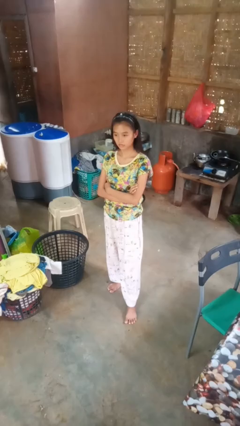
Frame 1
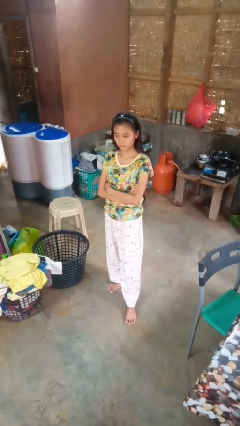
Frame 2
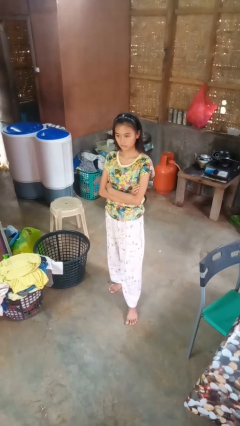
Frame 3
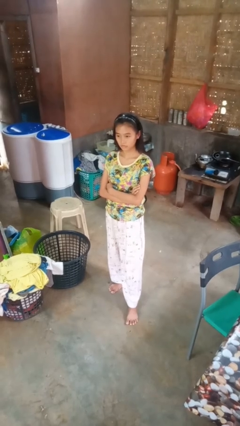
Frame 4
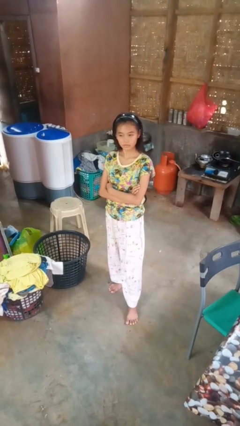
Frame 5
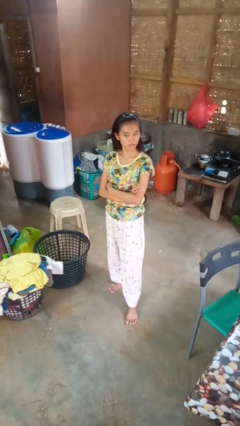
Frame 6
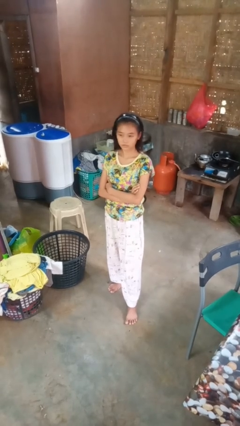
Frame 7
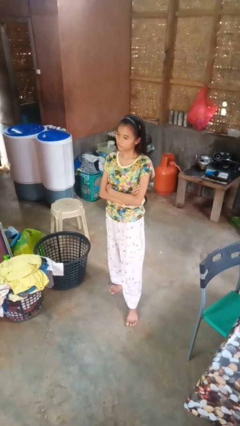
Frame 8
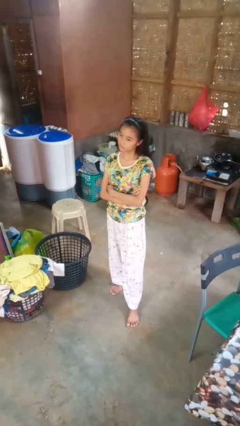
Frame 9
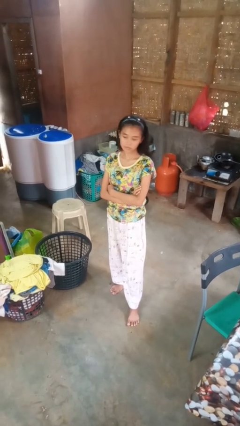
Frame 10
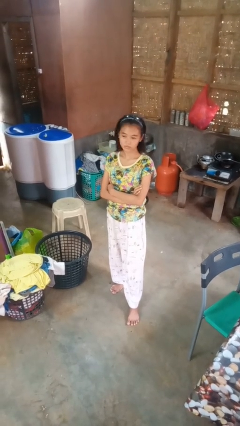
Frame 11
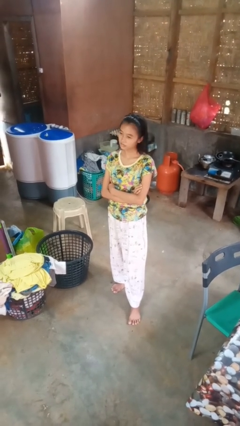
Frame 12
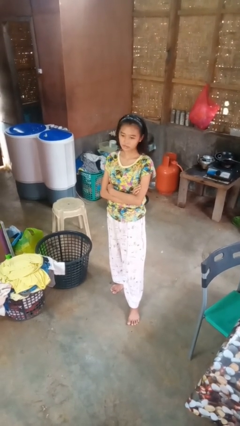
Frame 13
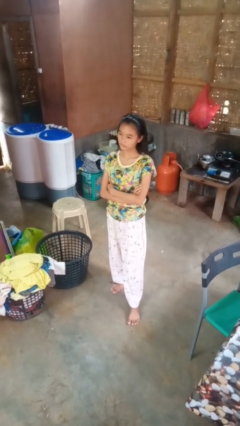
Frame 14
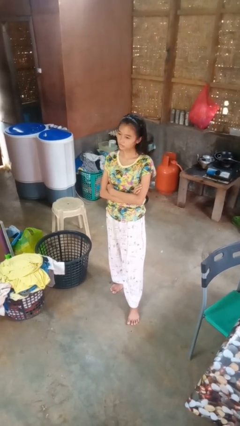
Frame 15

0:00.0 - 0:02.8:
person shakes head

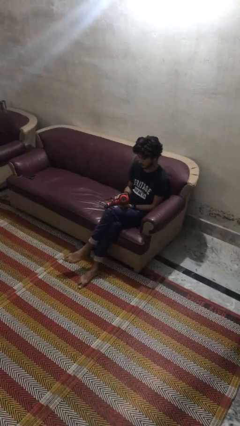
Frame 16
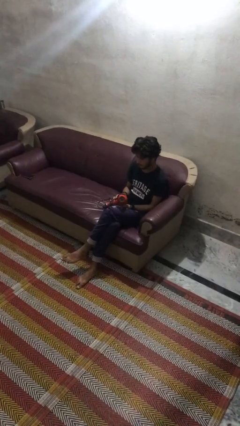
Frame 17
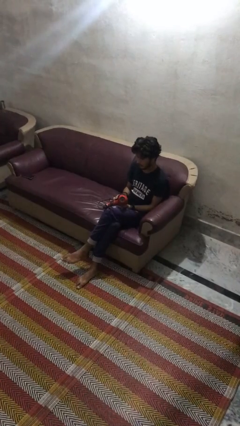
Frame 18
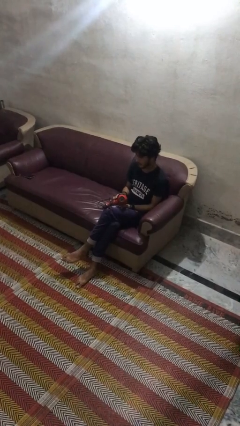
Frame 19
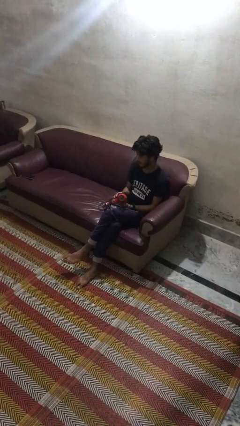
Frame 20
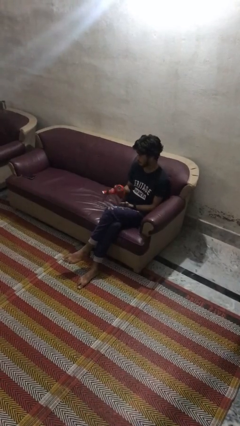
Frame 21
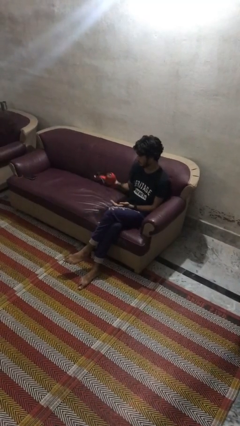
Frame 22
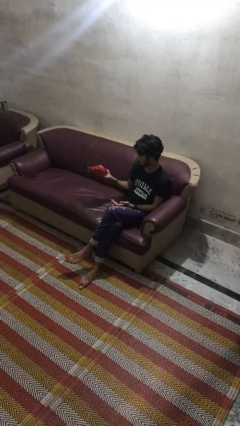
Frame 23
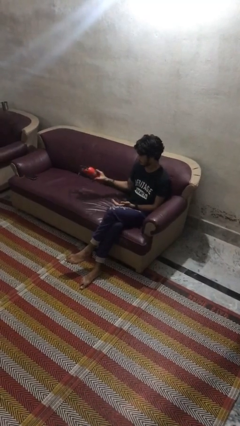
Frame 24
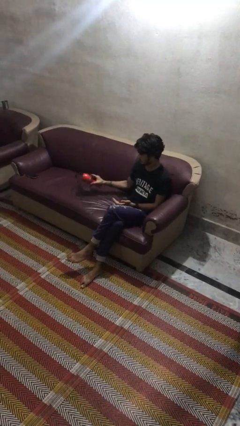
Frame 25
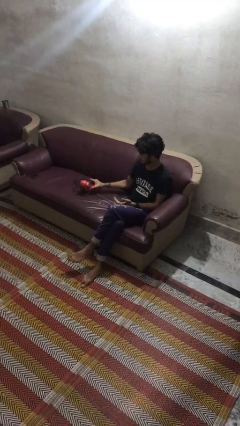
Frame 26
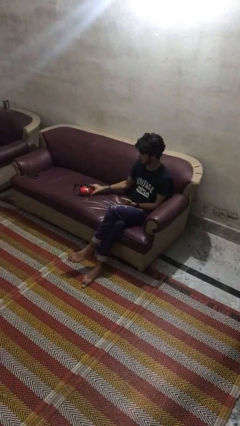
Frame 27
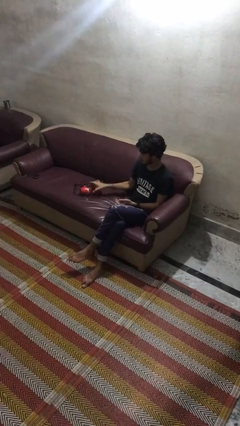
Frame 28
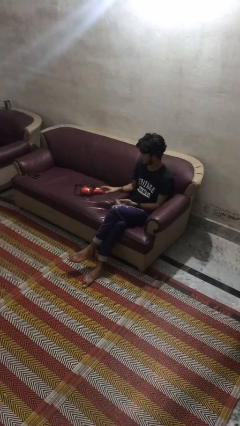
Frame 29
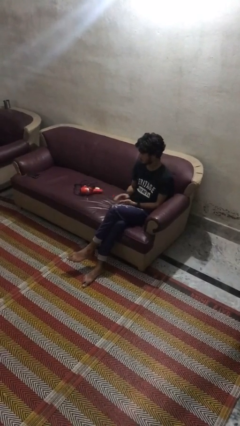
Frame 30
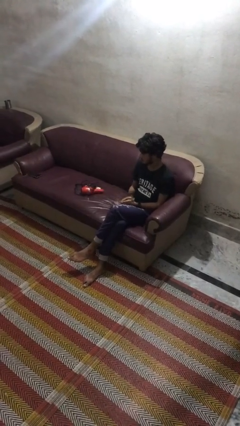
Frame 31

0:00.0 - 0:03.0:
person puts down object on couch

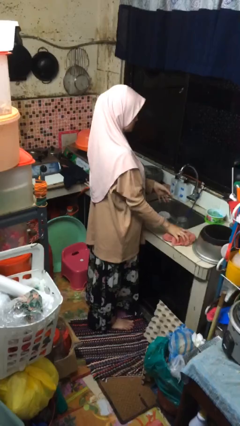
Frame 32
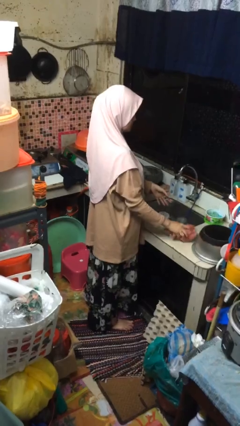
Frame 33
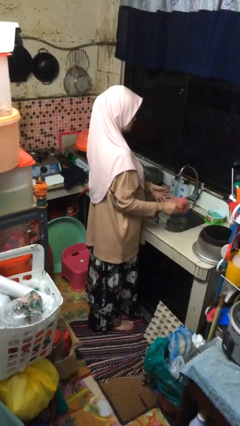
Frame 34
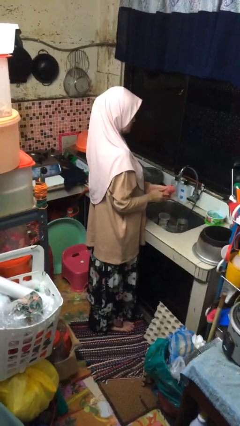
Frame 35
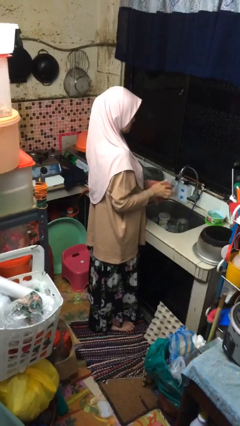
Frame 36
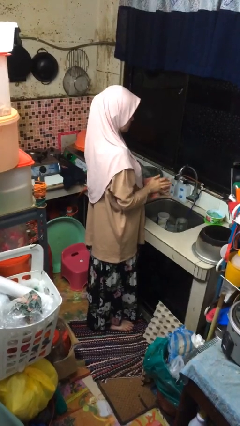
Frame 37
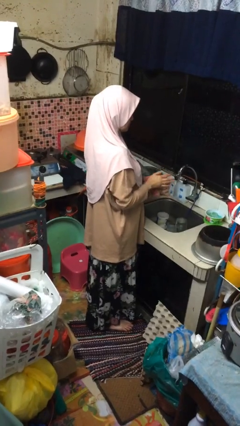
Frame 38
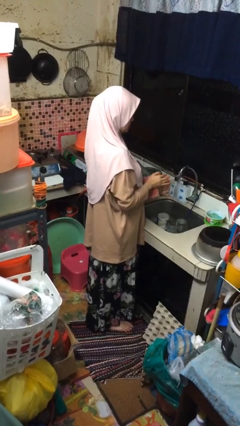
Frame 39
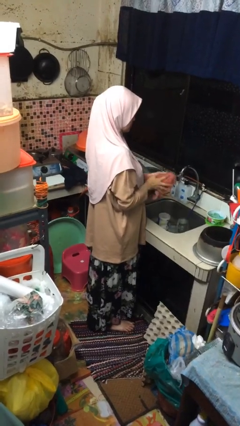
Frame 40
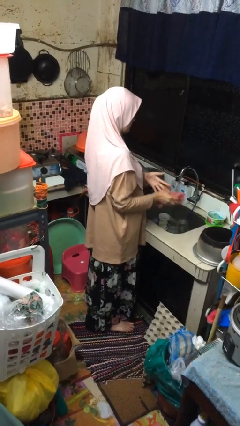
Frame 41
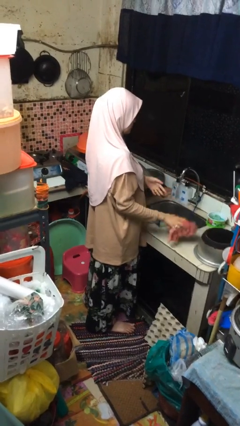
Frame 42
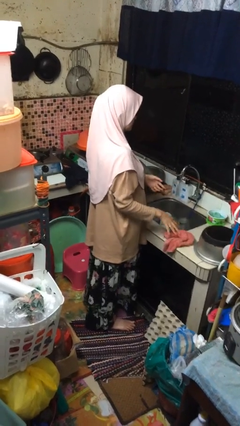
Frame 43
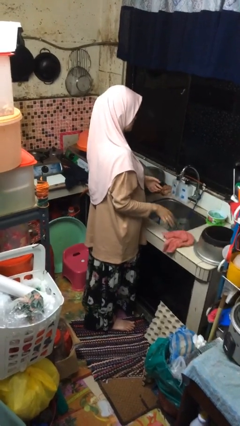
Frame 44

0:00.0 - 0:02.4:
person dries hands with towel

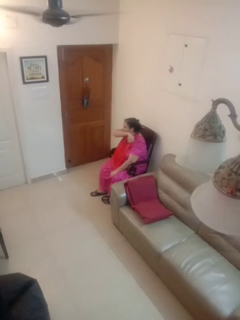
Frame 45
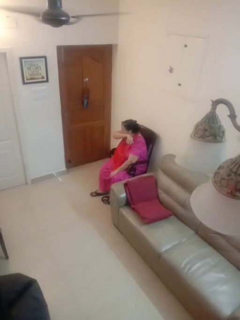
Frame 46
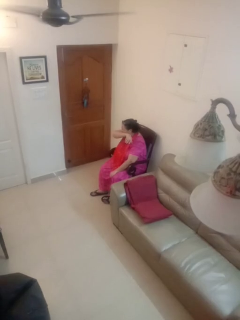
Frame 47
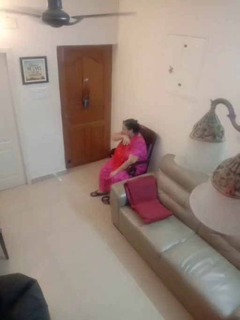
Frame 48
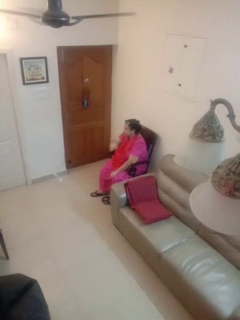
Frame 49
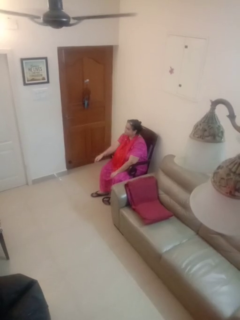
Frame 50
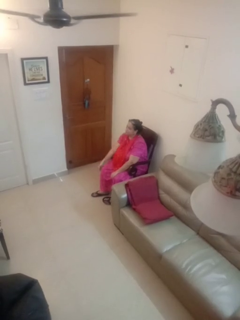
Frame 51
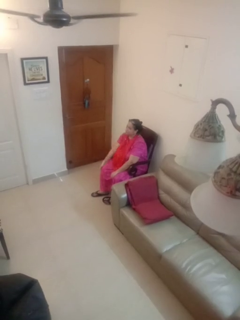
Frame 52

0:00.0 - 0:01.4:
person sneezes into arm

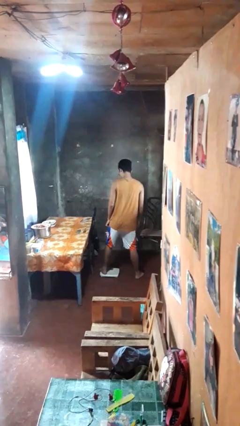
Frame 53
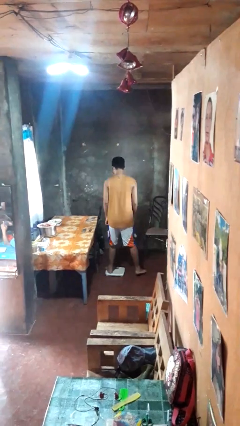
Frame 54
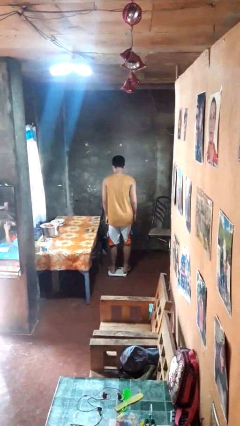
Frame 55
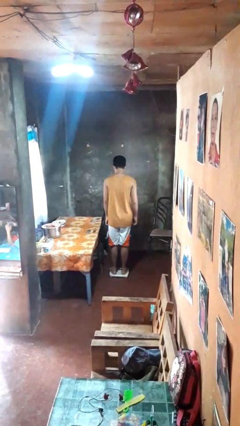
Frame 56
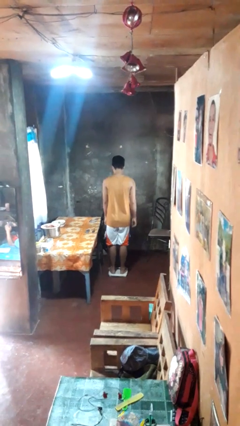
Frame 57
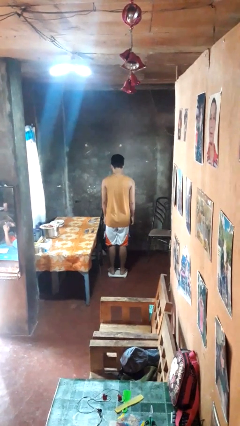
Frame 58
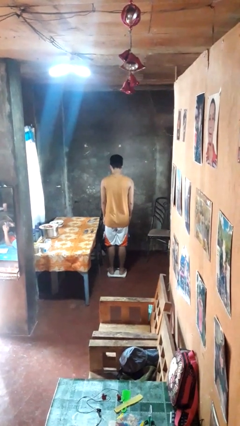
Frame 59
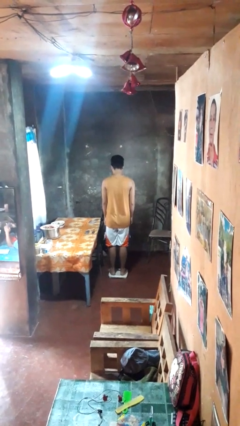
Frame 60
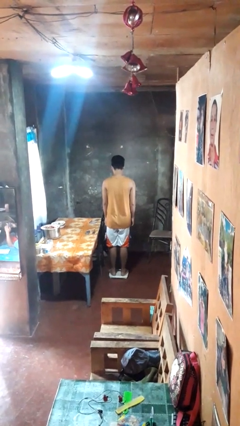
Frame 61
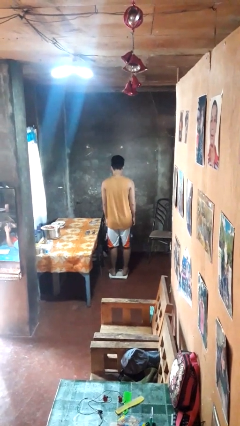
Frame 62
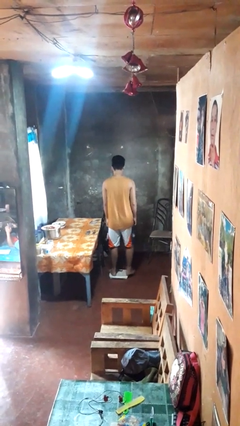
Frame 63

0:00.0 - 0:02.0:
person uses bodyweight scale

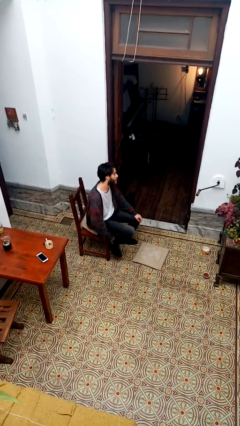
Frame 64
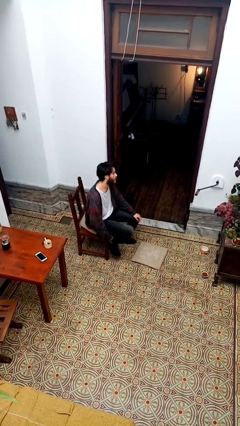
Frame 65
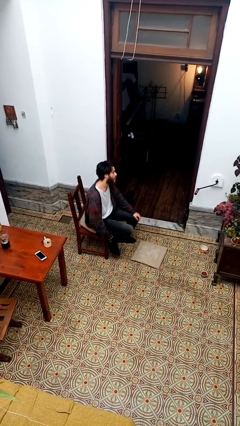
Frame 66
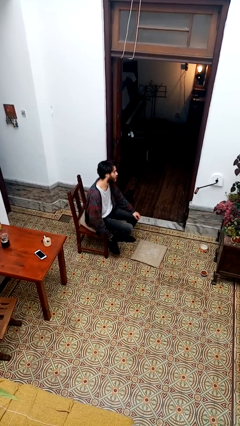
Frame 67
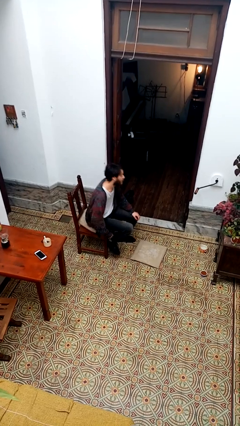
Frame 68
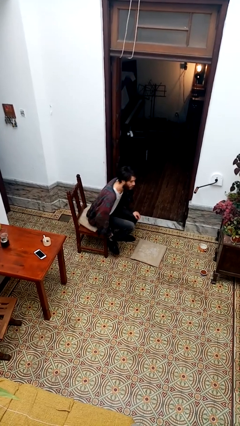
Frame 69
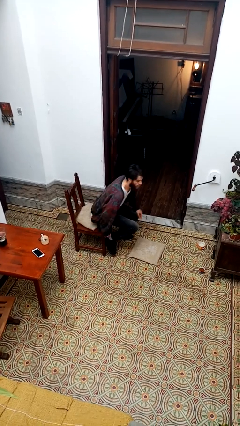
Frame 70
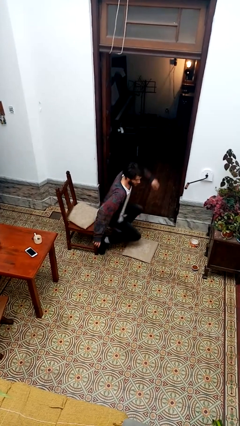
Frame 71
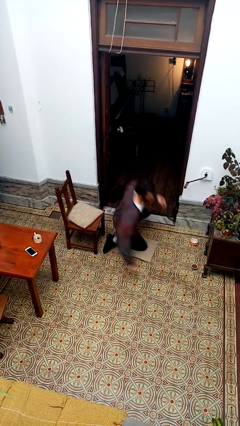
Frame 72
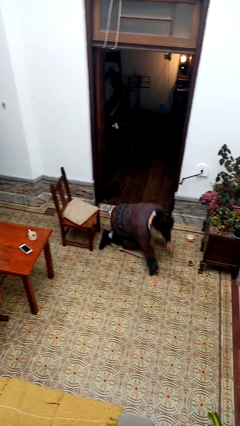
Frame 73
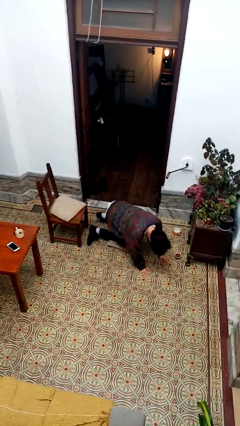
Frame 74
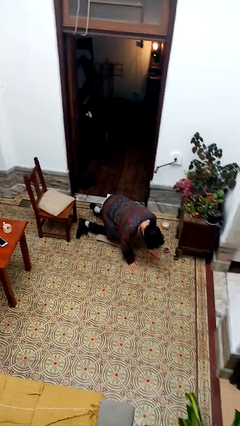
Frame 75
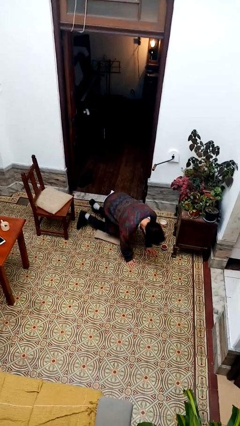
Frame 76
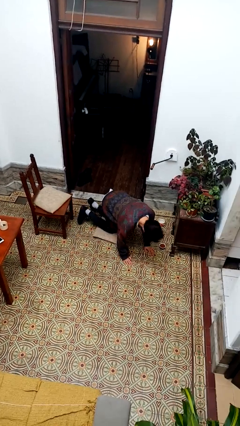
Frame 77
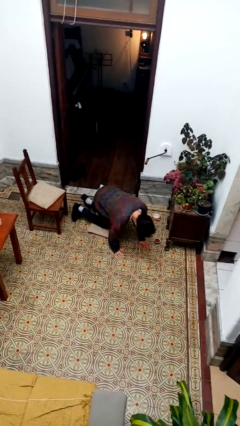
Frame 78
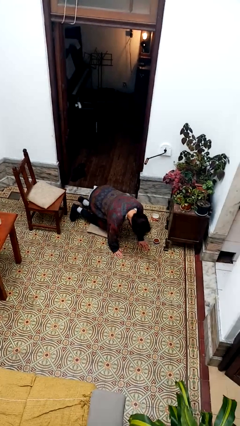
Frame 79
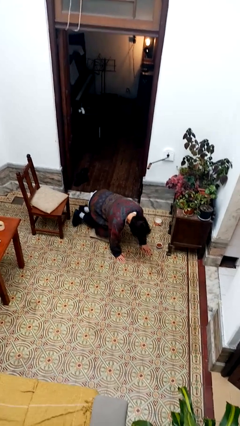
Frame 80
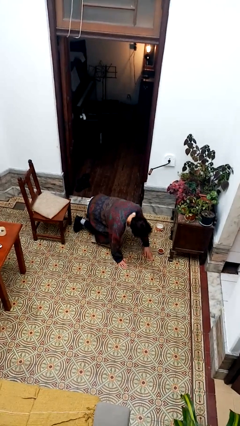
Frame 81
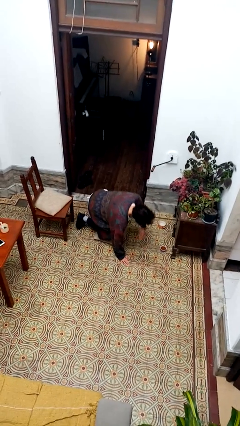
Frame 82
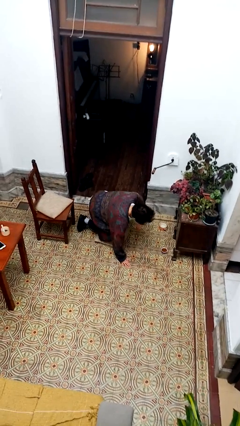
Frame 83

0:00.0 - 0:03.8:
person falls from chair

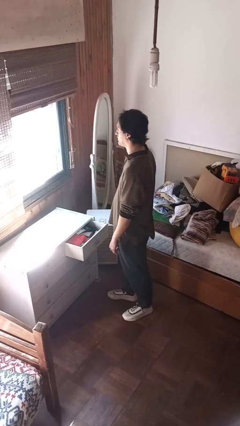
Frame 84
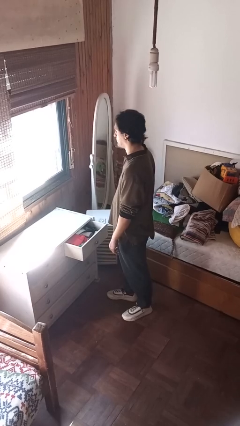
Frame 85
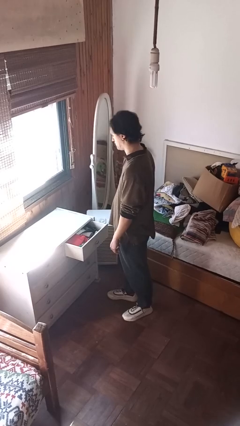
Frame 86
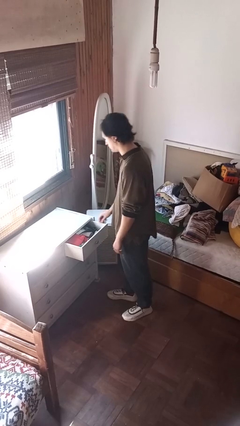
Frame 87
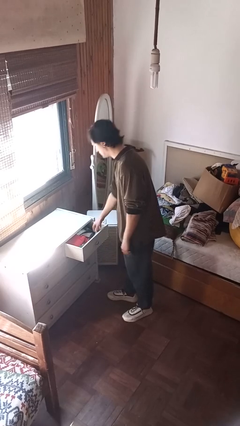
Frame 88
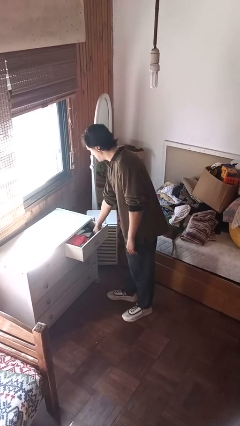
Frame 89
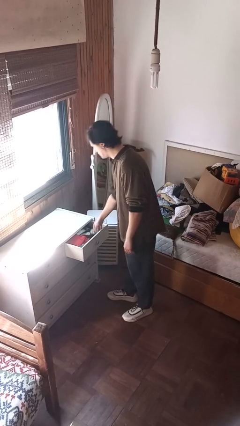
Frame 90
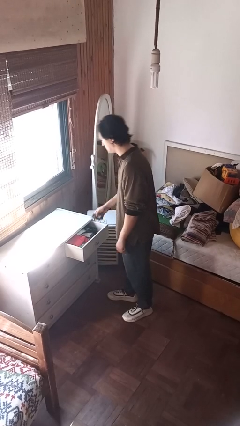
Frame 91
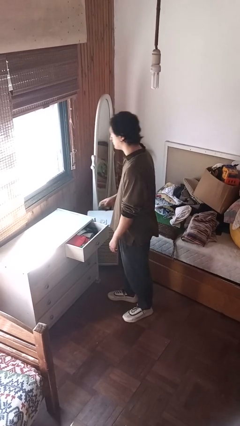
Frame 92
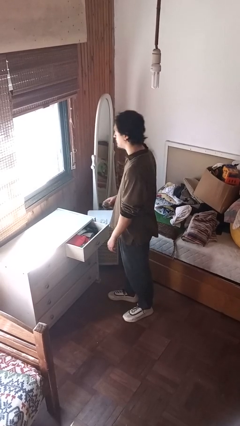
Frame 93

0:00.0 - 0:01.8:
person takes clothes from dresser
